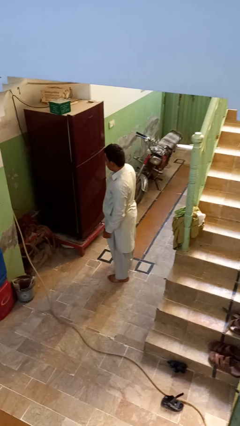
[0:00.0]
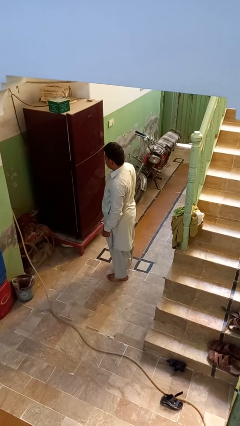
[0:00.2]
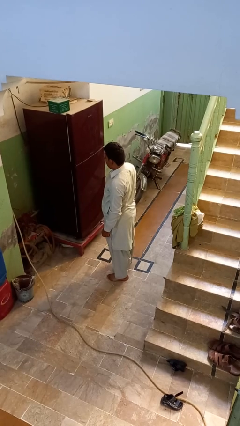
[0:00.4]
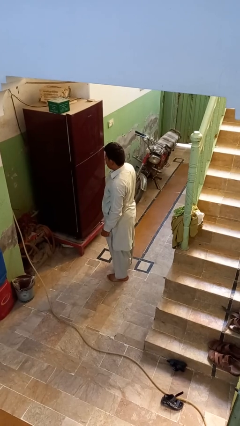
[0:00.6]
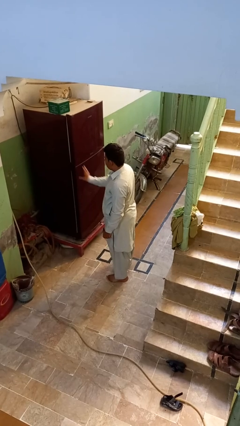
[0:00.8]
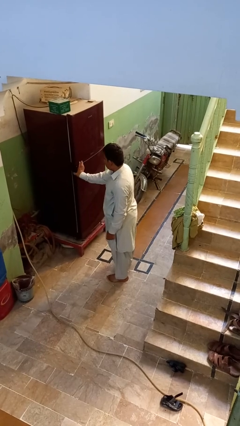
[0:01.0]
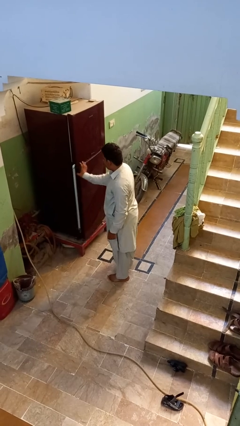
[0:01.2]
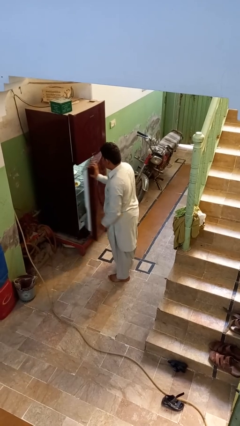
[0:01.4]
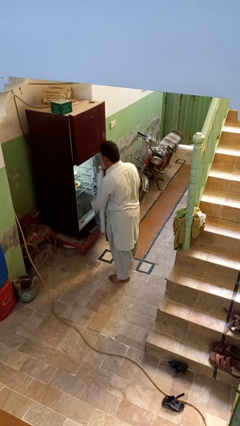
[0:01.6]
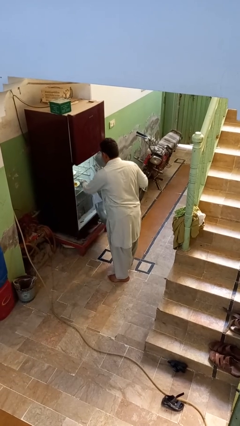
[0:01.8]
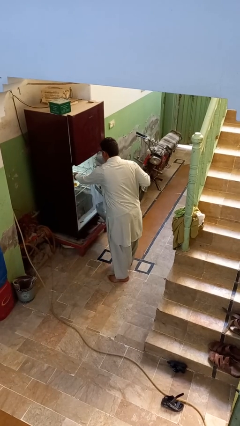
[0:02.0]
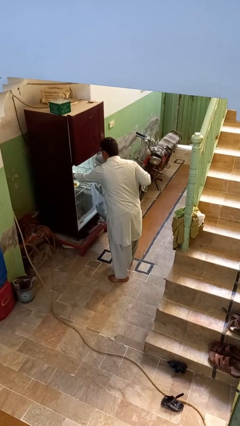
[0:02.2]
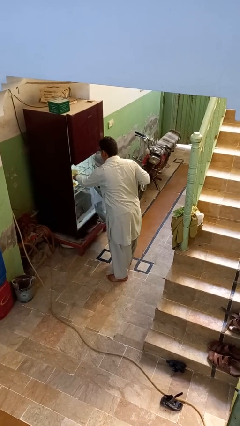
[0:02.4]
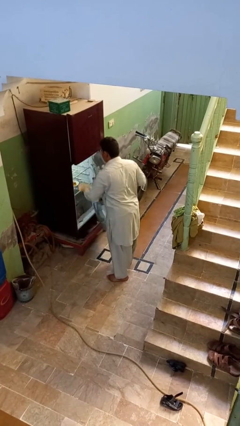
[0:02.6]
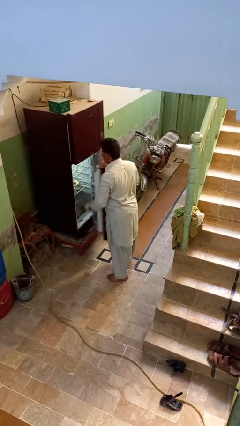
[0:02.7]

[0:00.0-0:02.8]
person takes object from refrigerator

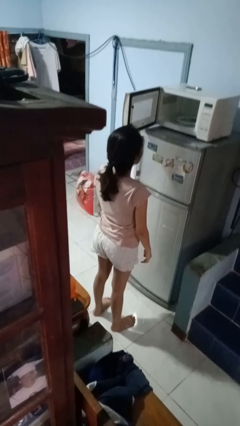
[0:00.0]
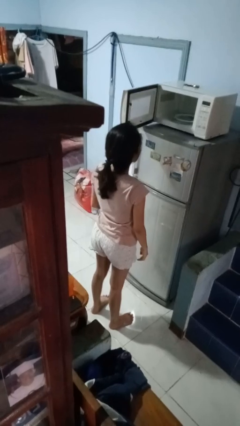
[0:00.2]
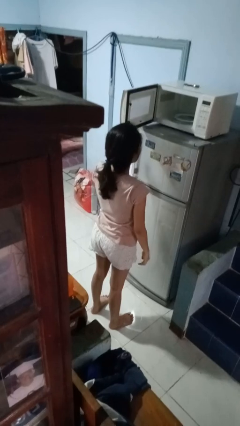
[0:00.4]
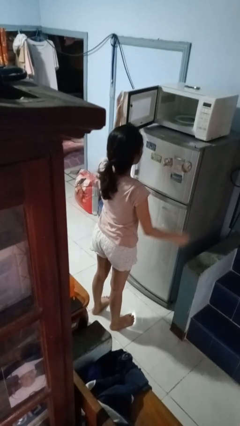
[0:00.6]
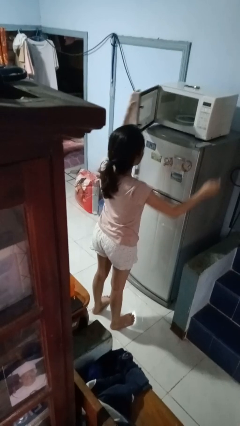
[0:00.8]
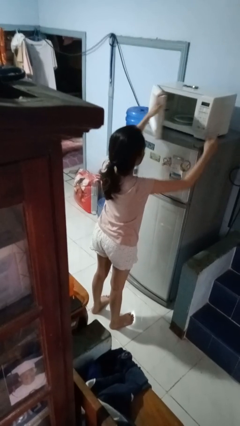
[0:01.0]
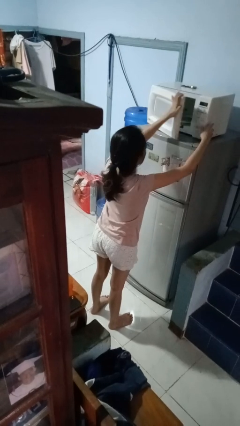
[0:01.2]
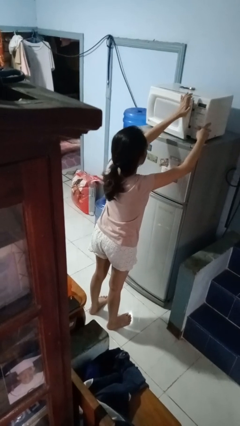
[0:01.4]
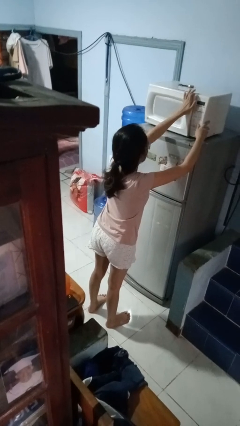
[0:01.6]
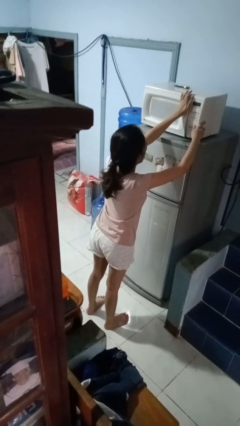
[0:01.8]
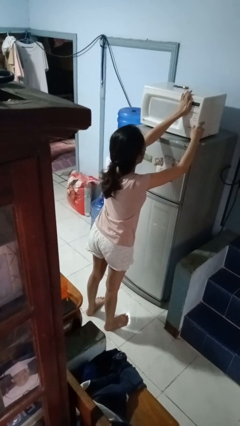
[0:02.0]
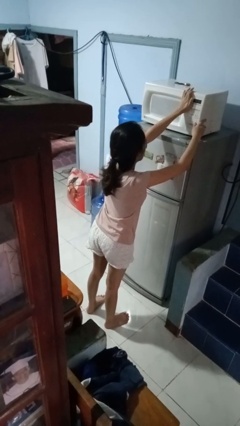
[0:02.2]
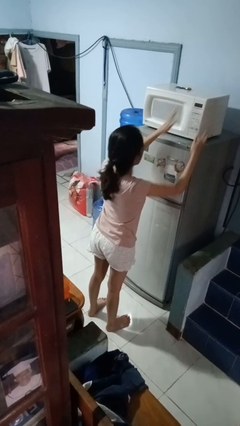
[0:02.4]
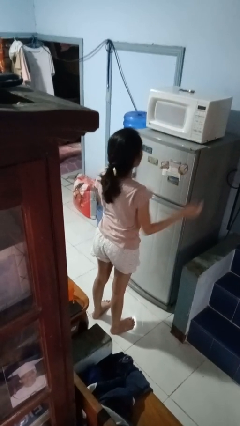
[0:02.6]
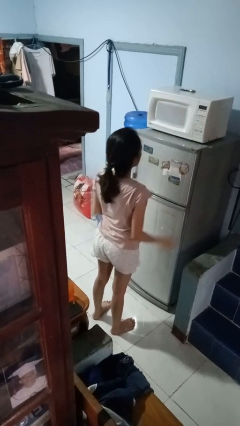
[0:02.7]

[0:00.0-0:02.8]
person closes microwave

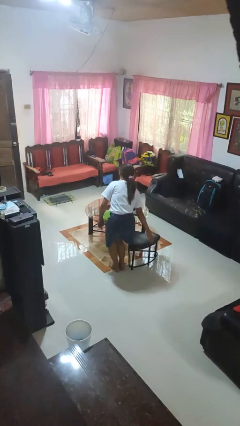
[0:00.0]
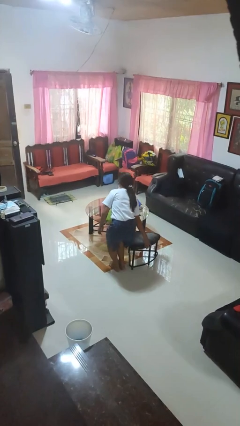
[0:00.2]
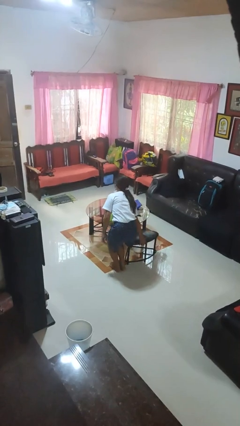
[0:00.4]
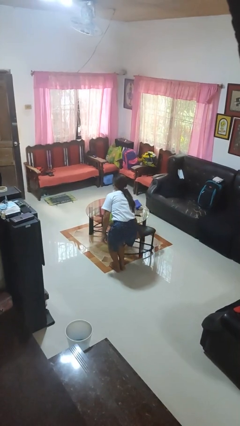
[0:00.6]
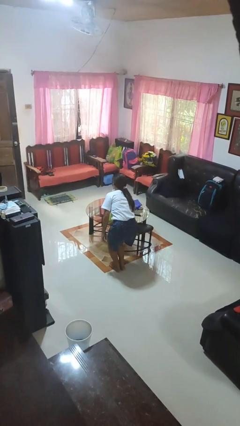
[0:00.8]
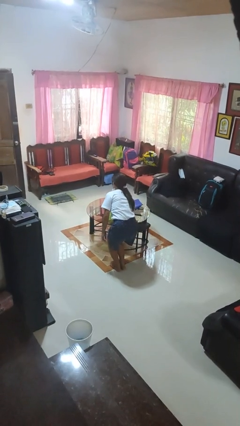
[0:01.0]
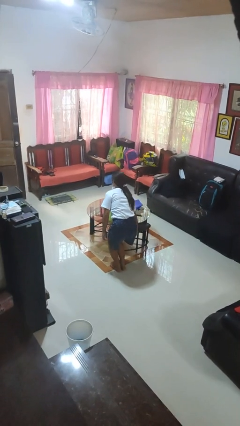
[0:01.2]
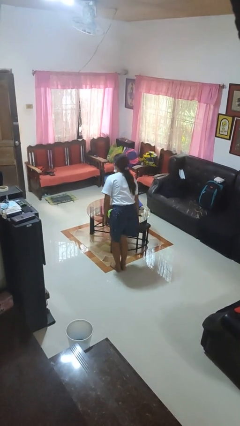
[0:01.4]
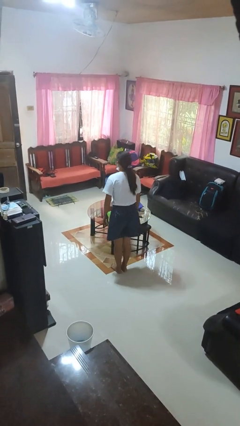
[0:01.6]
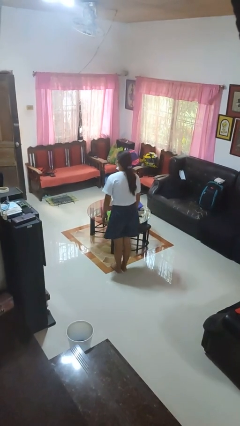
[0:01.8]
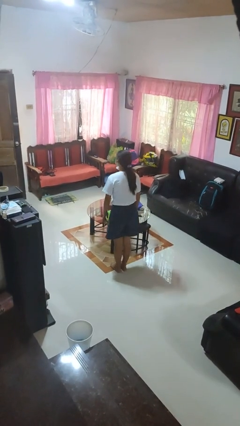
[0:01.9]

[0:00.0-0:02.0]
person pushes in chair

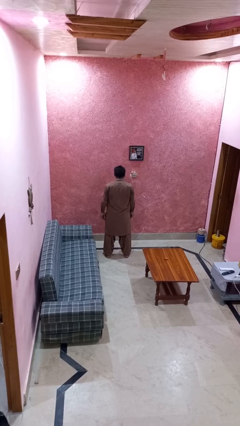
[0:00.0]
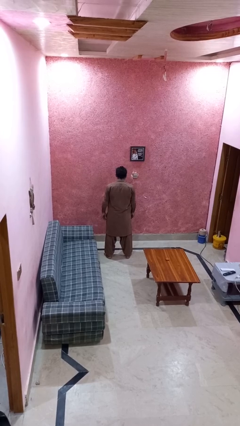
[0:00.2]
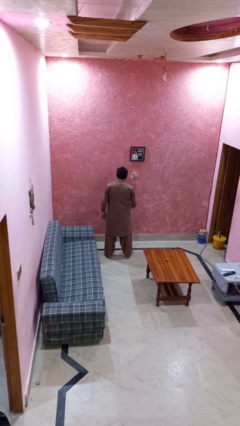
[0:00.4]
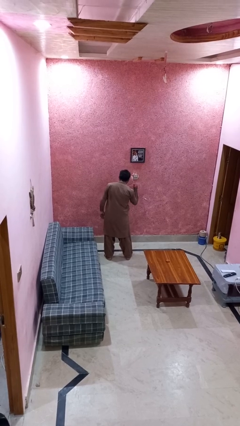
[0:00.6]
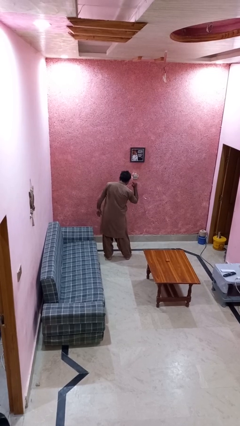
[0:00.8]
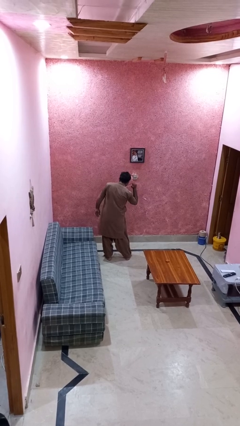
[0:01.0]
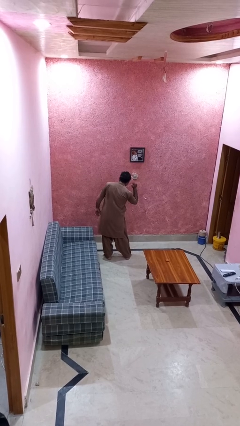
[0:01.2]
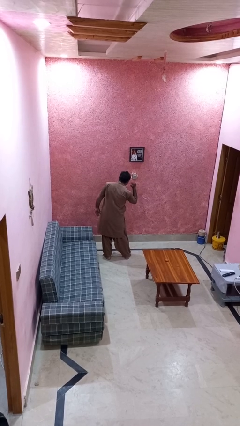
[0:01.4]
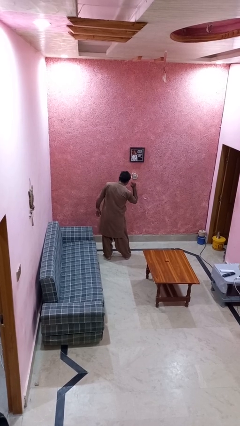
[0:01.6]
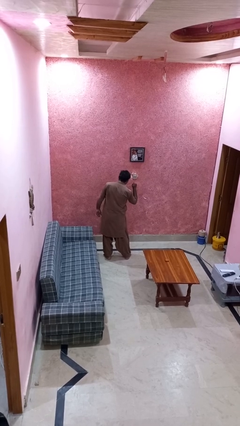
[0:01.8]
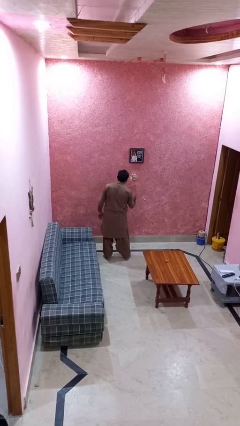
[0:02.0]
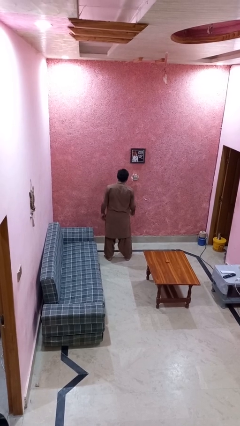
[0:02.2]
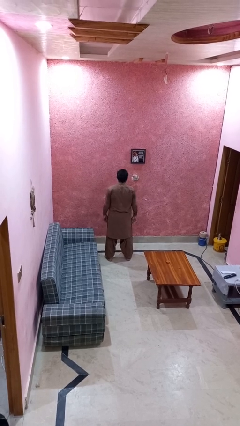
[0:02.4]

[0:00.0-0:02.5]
person gestures behind me

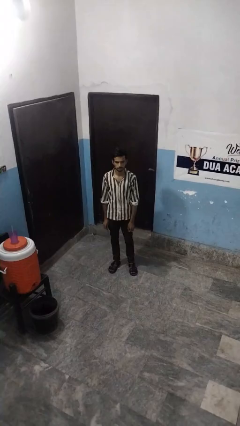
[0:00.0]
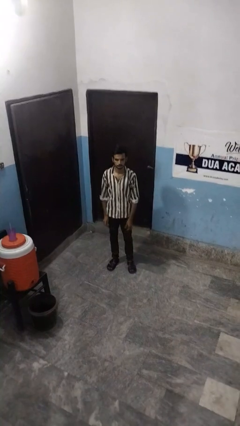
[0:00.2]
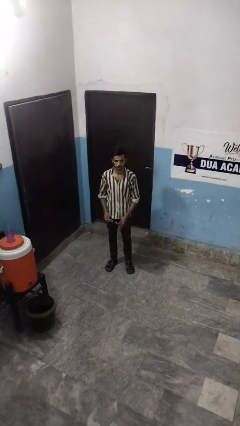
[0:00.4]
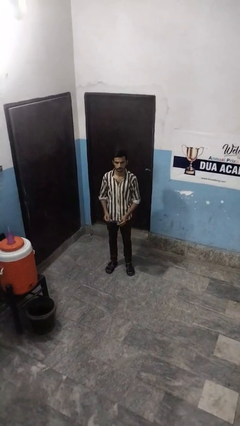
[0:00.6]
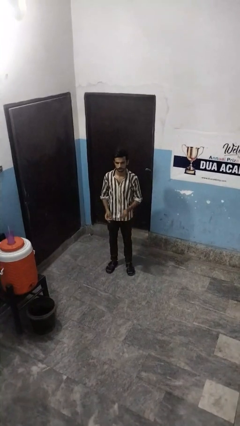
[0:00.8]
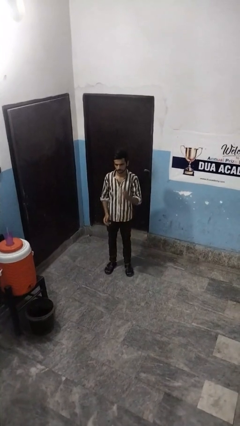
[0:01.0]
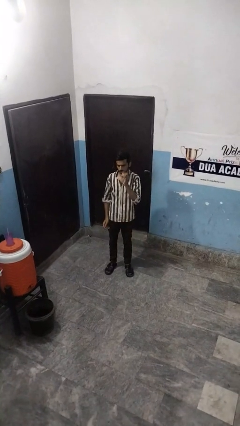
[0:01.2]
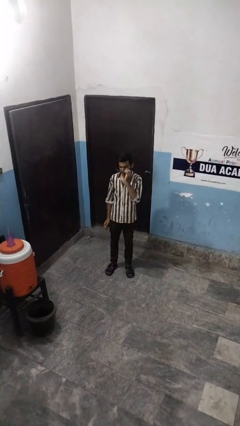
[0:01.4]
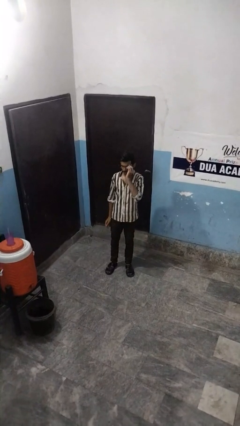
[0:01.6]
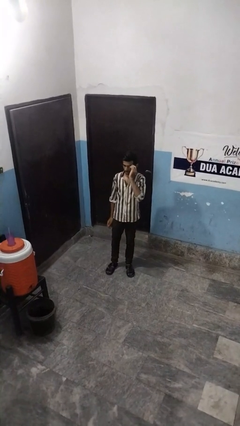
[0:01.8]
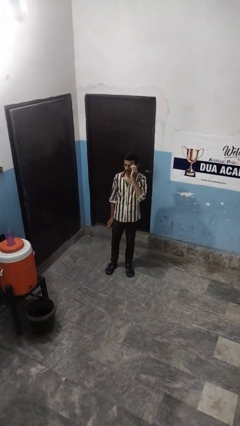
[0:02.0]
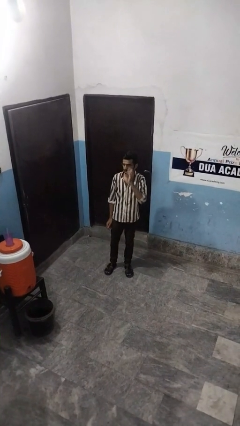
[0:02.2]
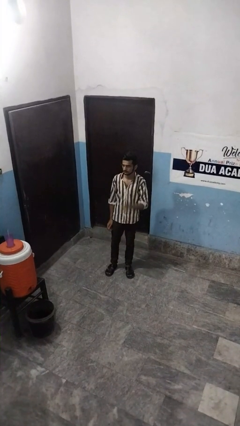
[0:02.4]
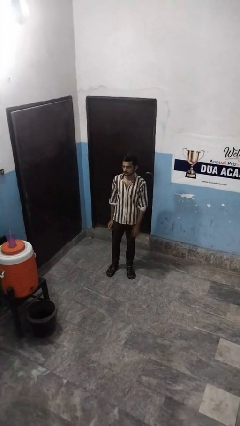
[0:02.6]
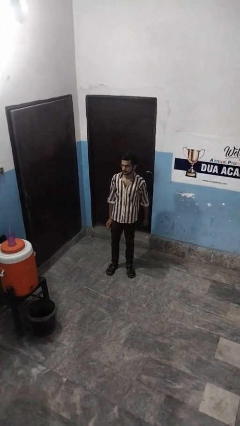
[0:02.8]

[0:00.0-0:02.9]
person puts on glasses

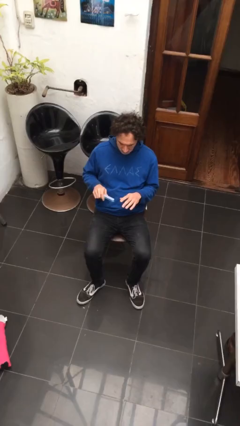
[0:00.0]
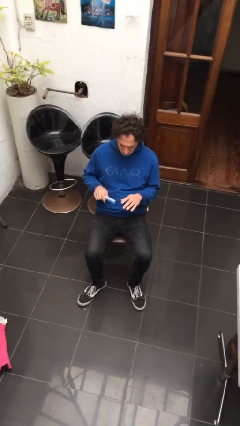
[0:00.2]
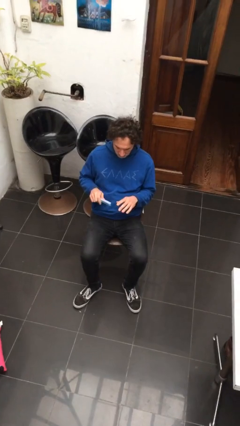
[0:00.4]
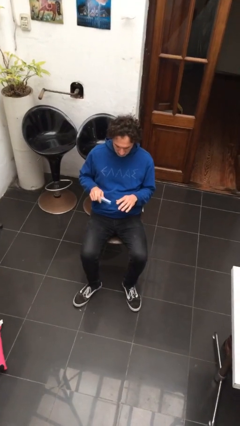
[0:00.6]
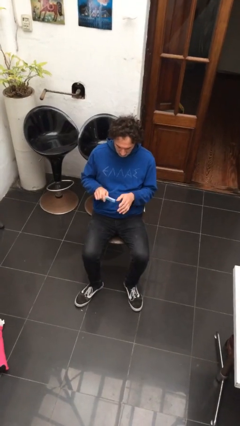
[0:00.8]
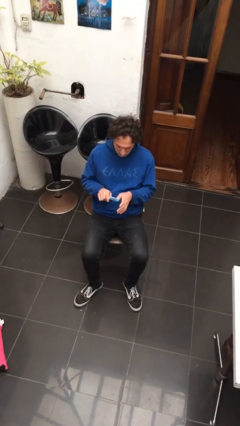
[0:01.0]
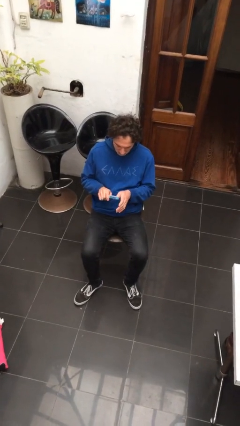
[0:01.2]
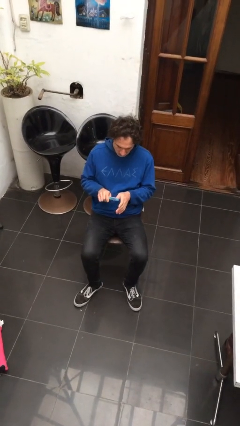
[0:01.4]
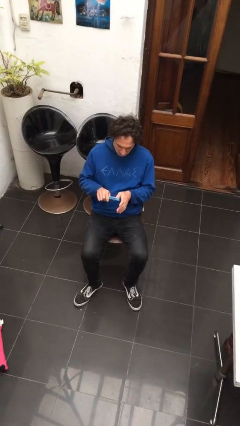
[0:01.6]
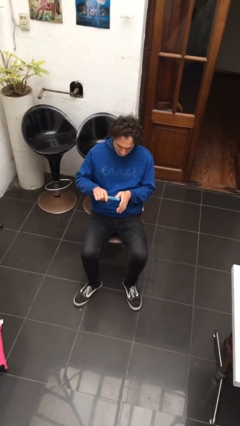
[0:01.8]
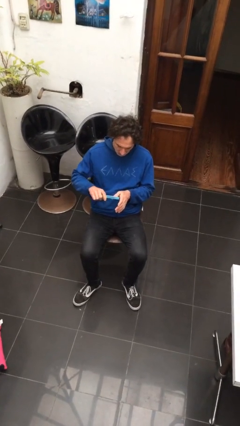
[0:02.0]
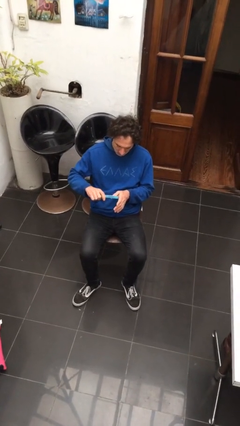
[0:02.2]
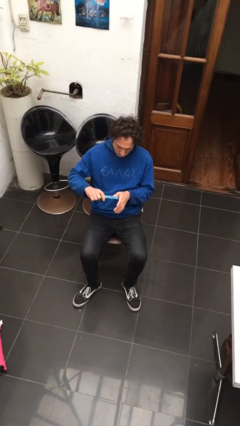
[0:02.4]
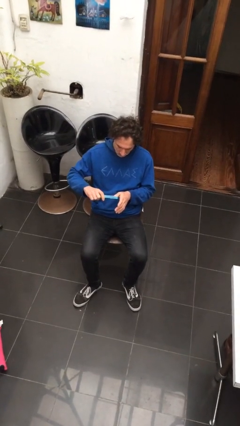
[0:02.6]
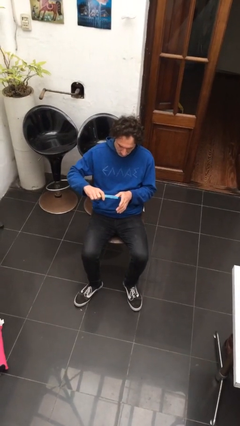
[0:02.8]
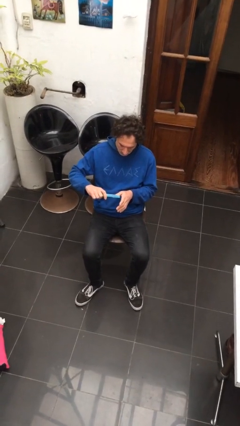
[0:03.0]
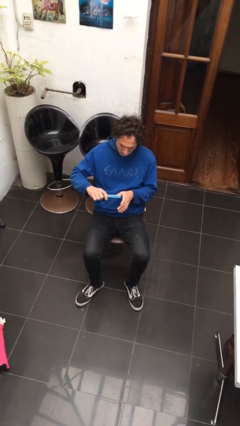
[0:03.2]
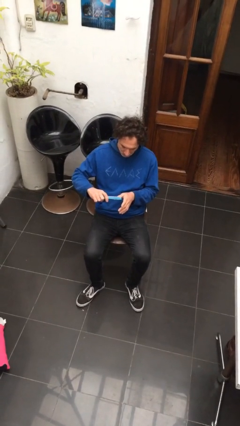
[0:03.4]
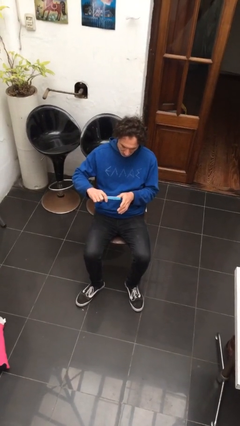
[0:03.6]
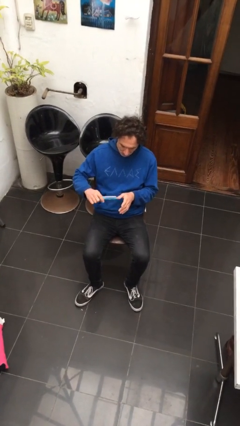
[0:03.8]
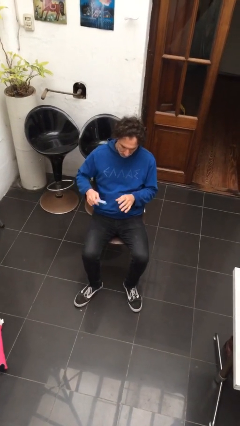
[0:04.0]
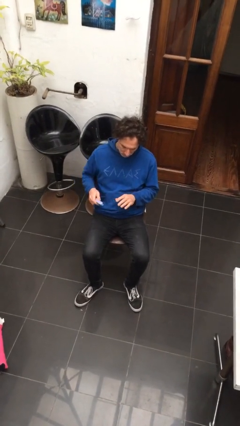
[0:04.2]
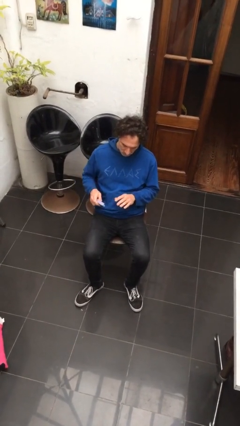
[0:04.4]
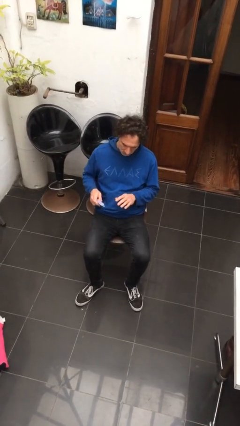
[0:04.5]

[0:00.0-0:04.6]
person files fingernails
